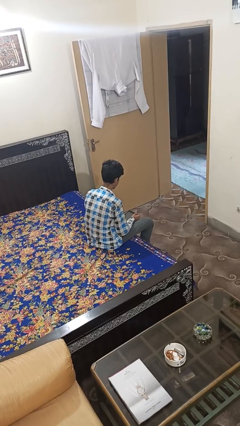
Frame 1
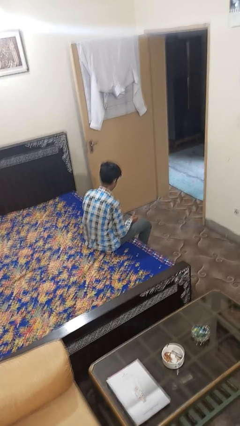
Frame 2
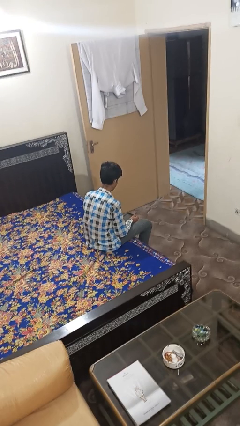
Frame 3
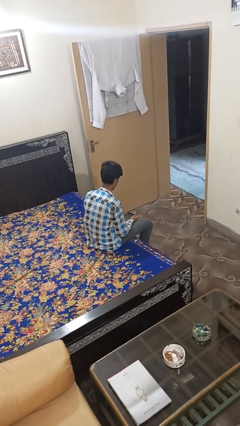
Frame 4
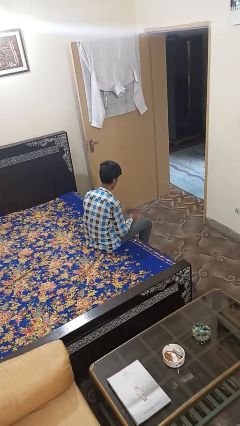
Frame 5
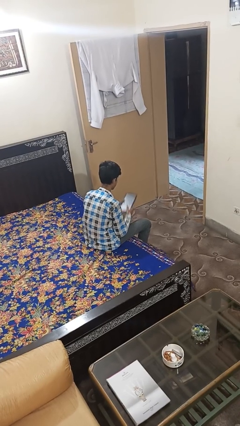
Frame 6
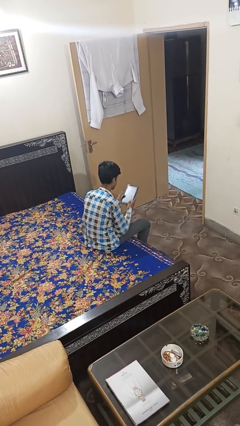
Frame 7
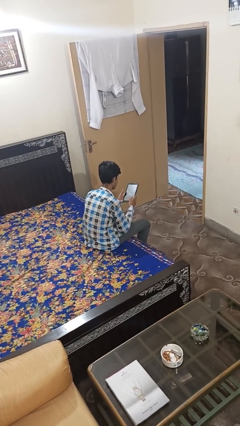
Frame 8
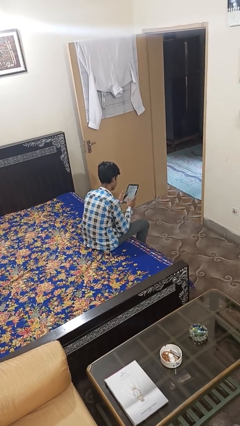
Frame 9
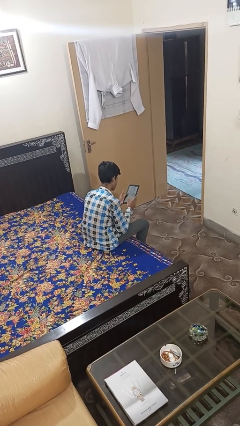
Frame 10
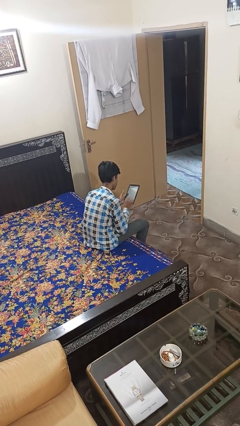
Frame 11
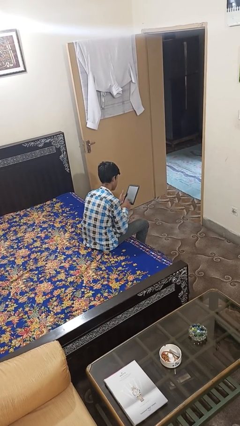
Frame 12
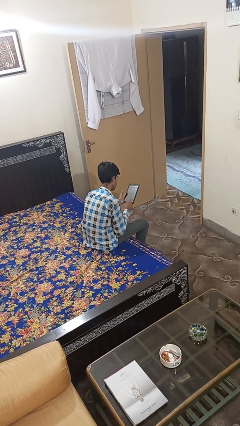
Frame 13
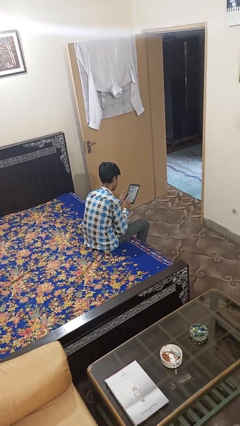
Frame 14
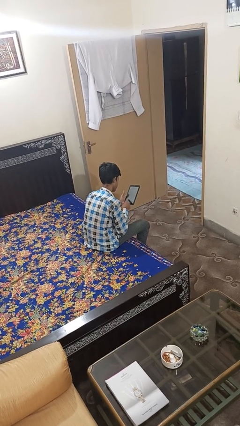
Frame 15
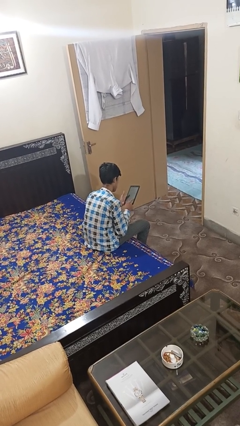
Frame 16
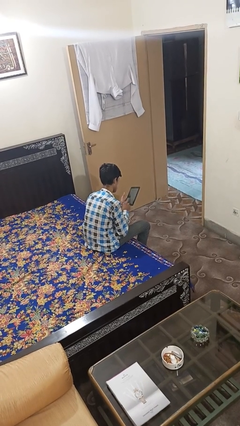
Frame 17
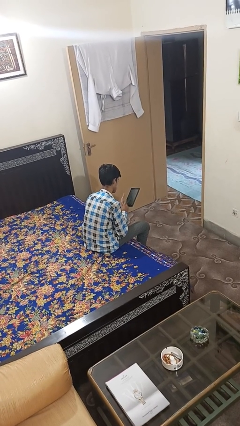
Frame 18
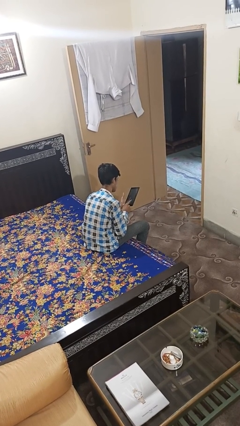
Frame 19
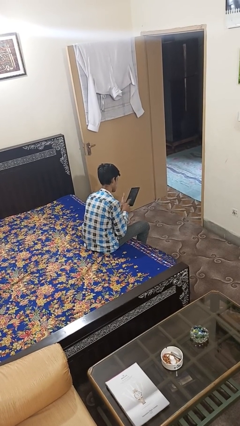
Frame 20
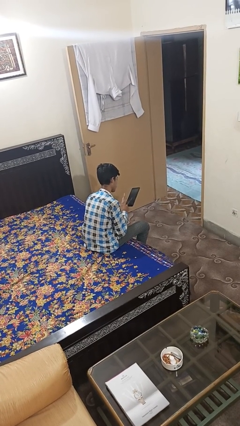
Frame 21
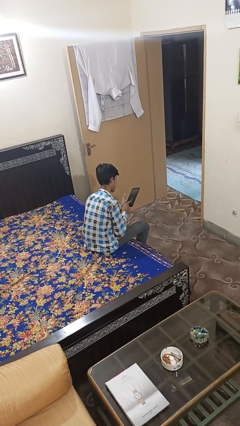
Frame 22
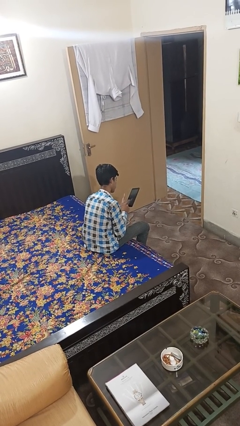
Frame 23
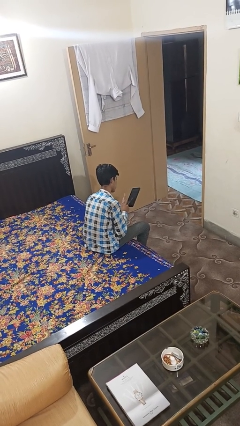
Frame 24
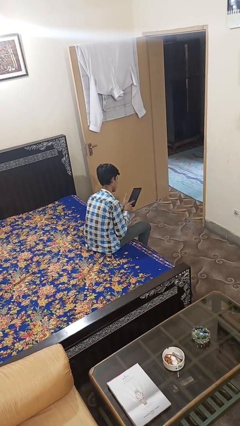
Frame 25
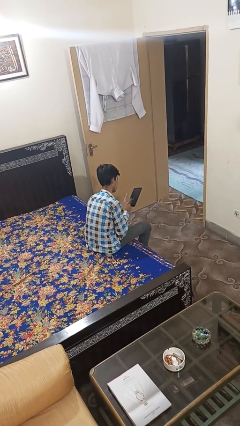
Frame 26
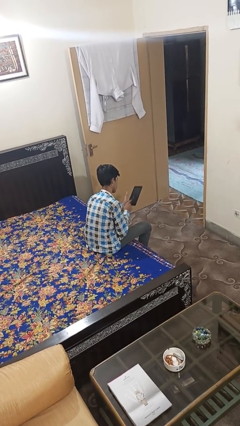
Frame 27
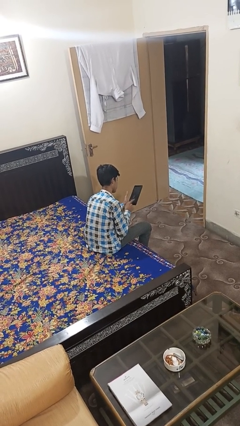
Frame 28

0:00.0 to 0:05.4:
person interacts with tablet

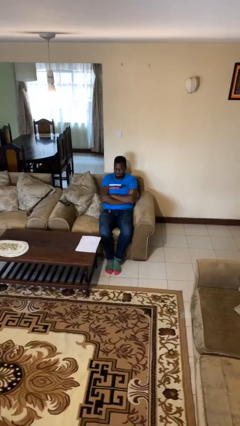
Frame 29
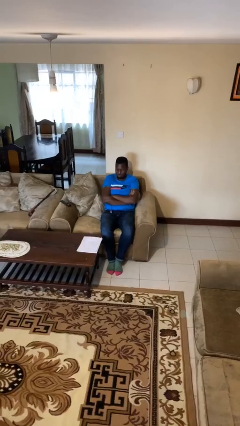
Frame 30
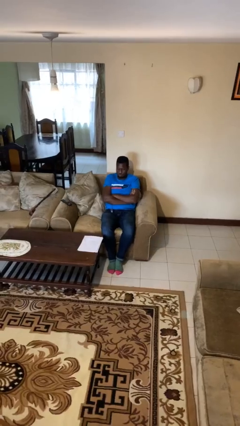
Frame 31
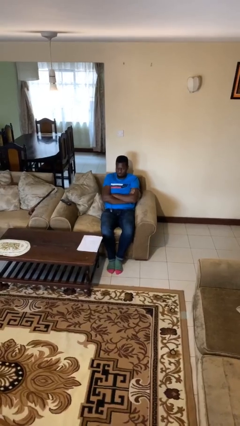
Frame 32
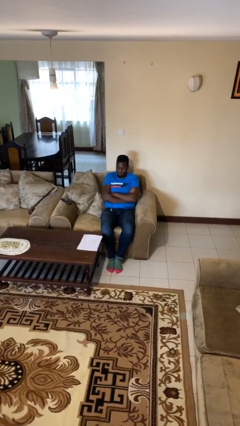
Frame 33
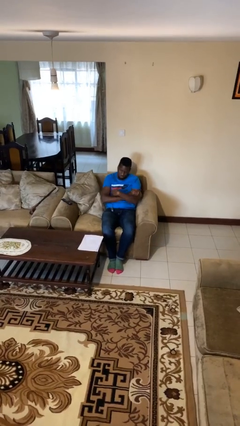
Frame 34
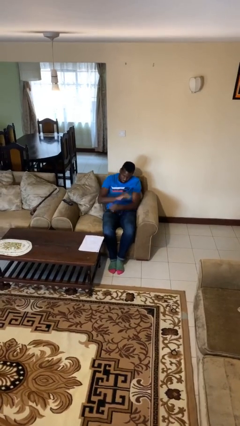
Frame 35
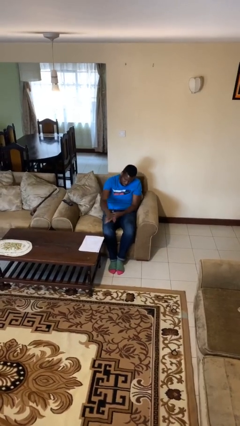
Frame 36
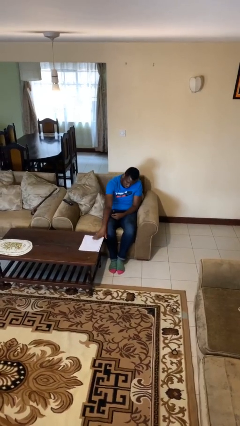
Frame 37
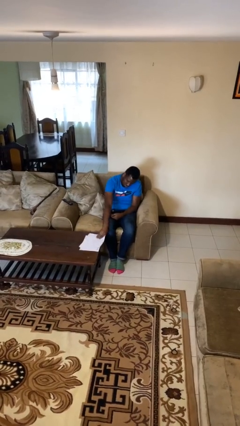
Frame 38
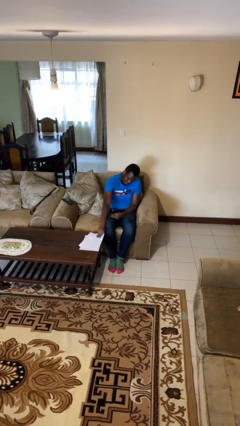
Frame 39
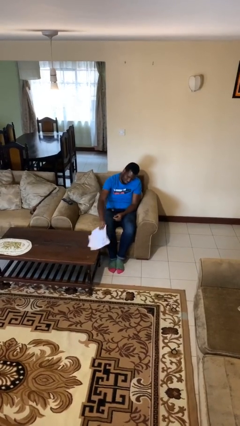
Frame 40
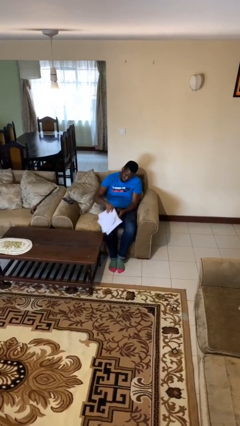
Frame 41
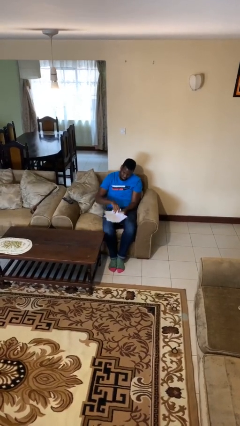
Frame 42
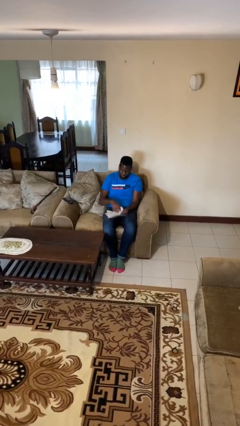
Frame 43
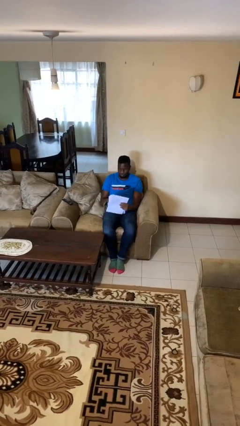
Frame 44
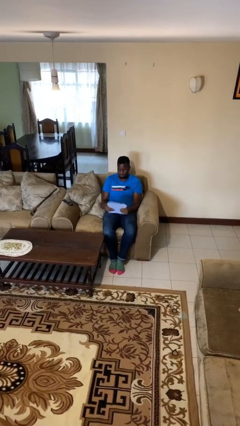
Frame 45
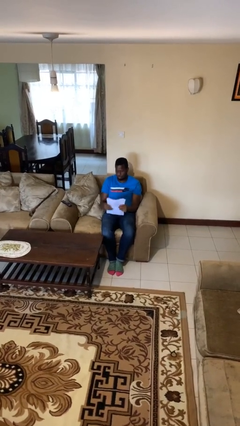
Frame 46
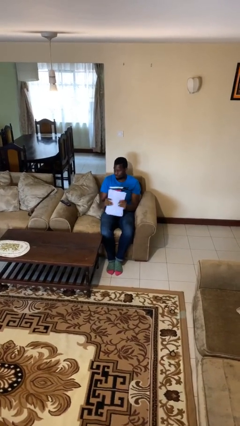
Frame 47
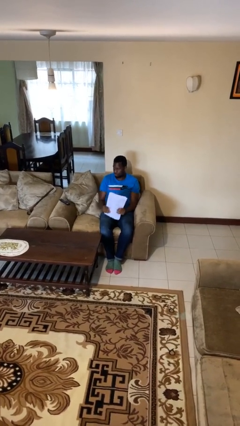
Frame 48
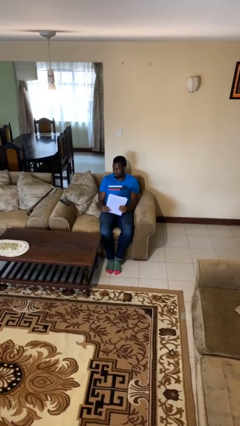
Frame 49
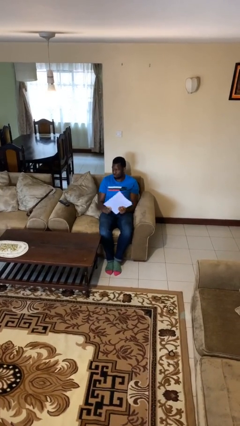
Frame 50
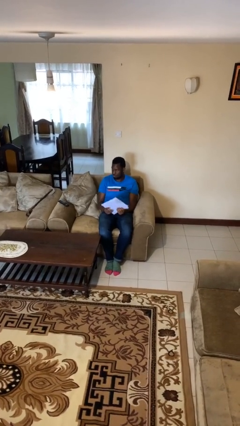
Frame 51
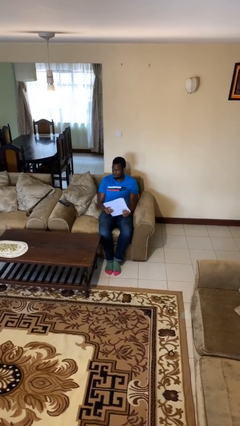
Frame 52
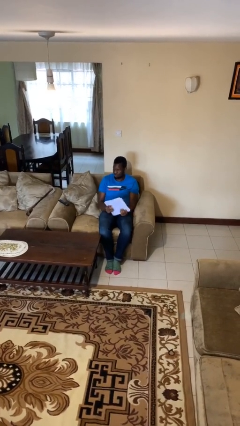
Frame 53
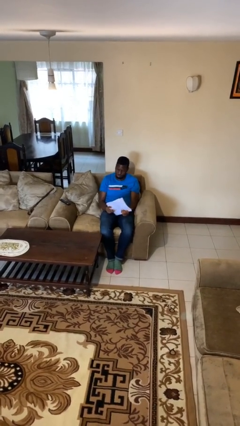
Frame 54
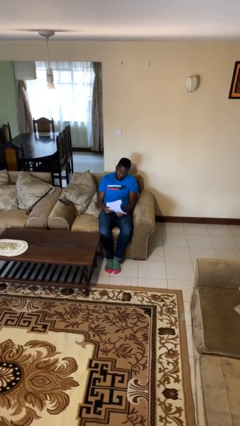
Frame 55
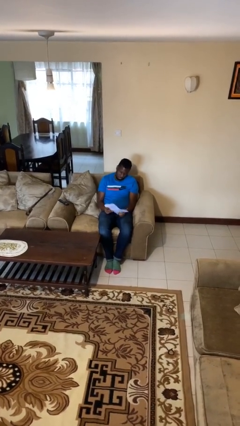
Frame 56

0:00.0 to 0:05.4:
person picks up object from table

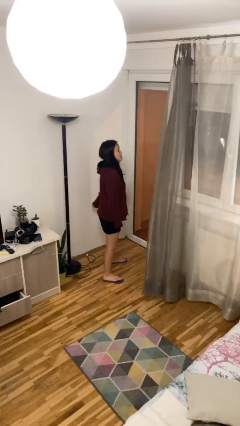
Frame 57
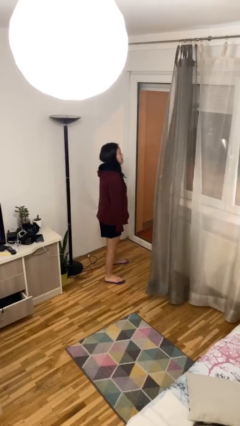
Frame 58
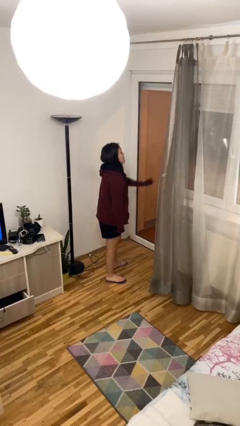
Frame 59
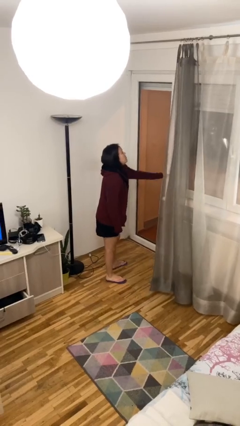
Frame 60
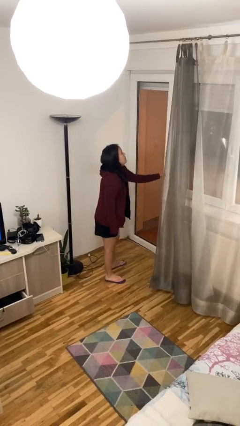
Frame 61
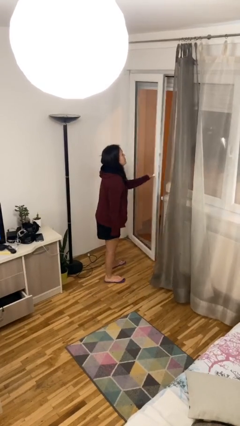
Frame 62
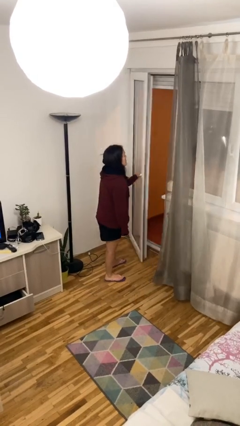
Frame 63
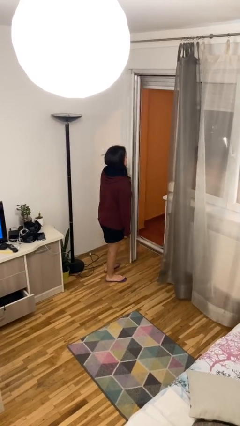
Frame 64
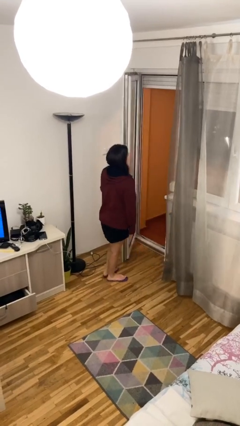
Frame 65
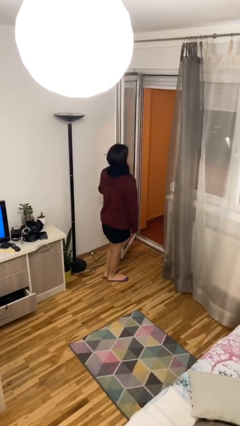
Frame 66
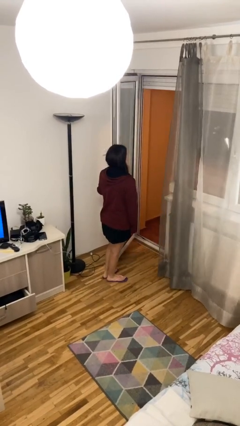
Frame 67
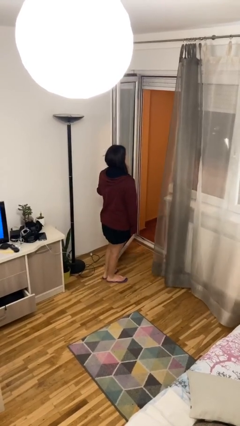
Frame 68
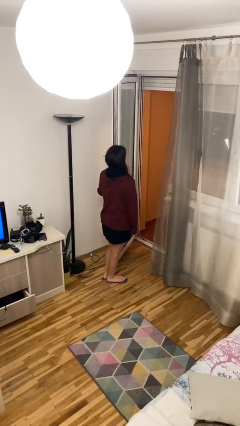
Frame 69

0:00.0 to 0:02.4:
person opens facility door

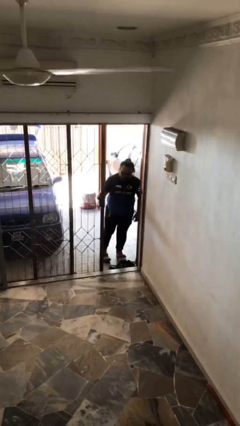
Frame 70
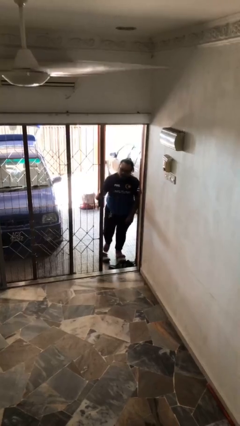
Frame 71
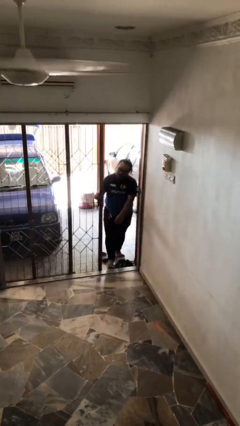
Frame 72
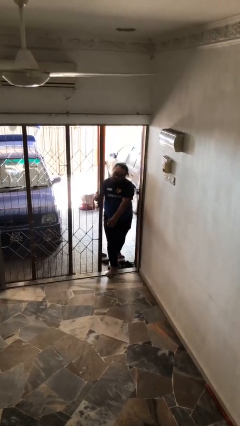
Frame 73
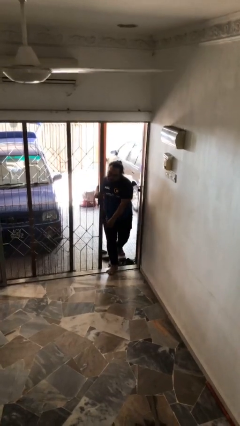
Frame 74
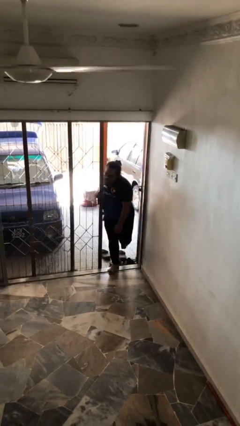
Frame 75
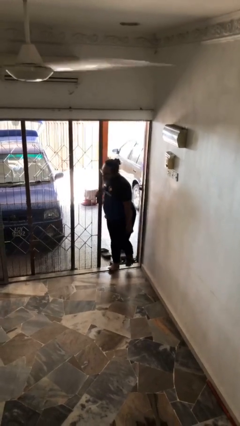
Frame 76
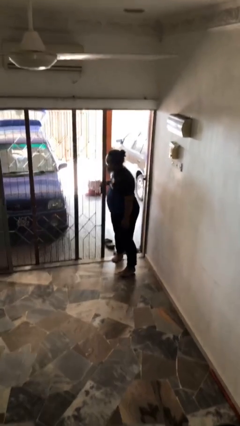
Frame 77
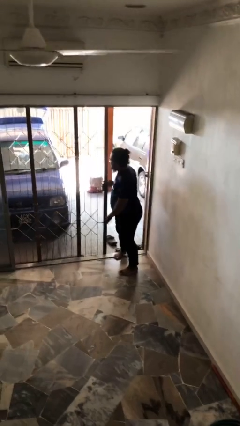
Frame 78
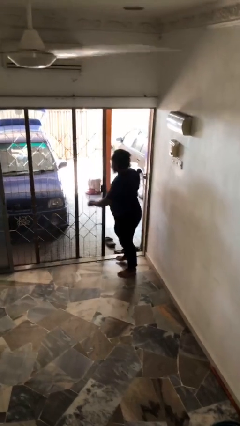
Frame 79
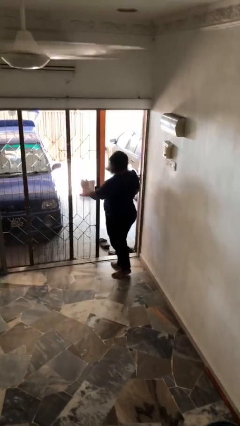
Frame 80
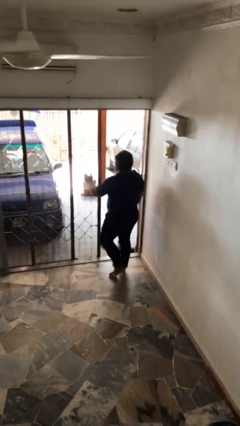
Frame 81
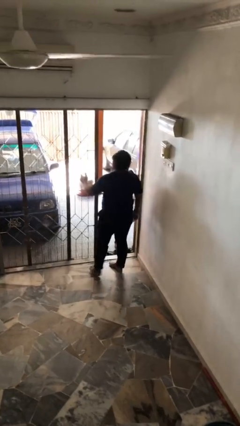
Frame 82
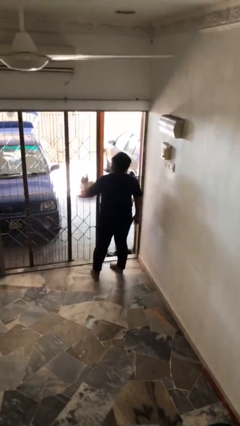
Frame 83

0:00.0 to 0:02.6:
person enters scene through structure

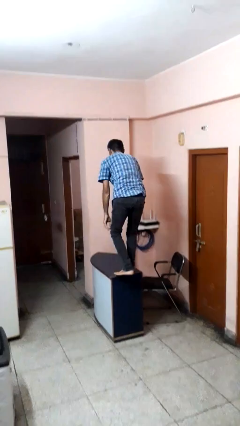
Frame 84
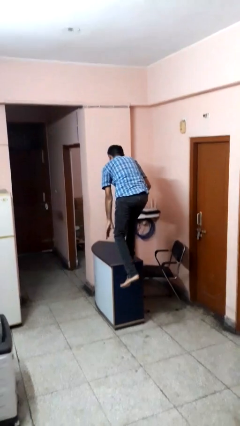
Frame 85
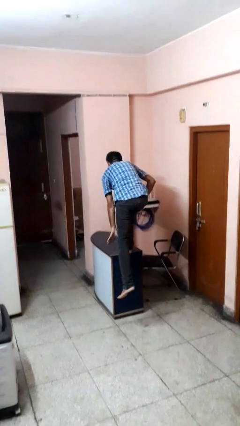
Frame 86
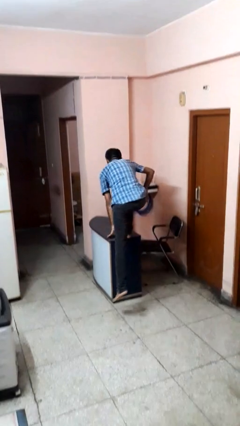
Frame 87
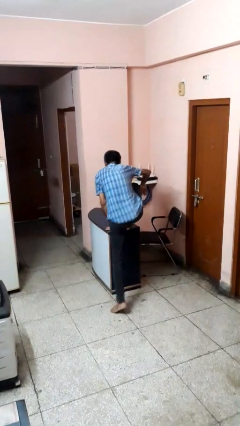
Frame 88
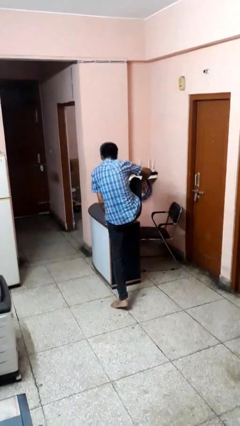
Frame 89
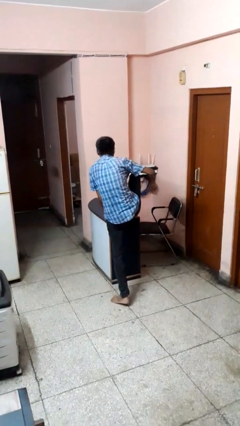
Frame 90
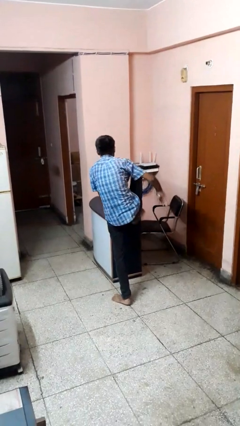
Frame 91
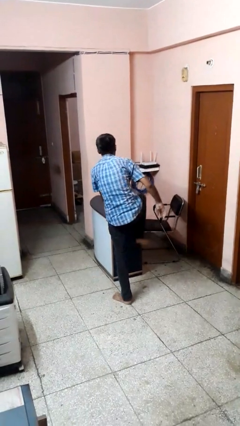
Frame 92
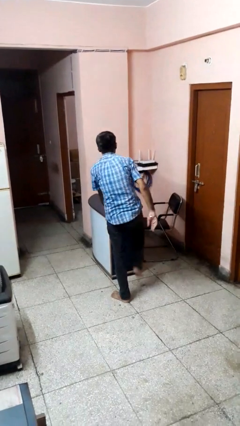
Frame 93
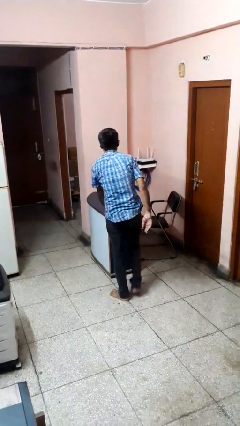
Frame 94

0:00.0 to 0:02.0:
person climbs off table
